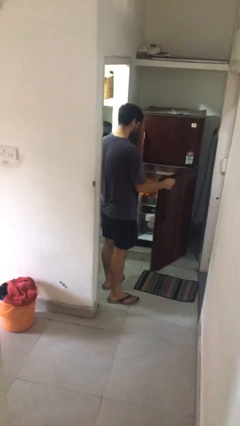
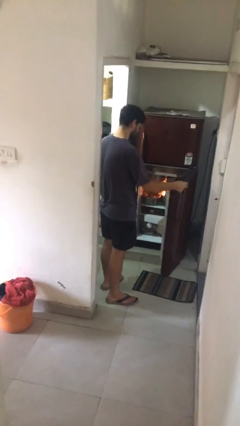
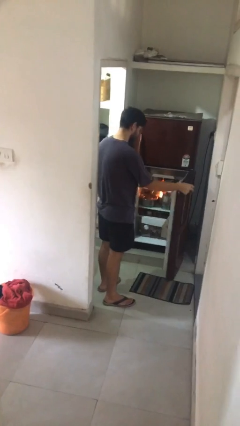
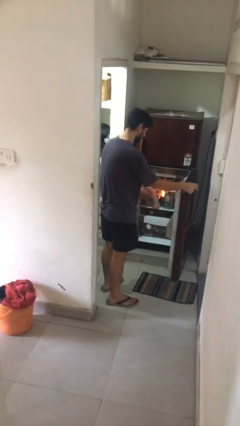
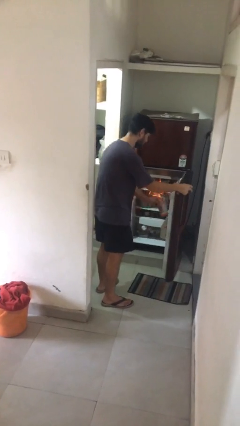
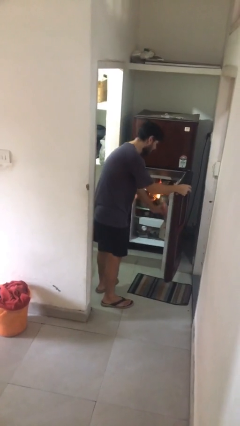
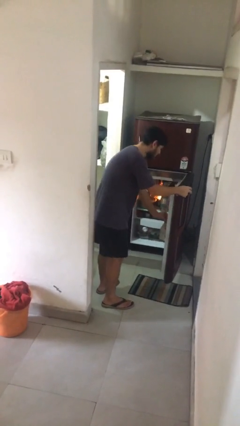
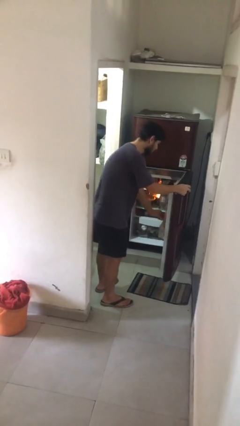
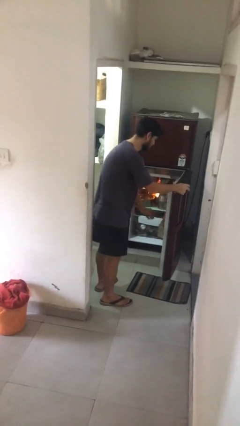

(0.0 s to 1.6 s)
person puts object into refrigerator

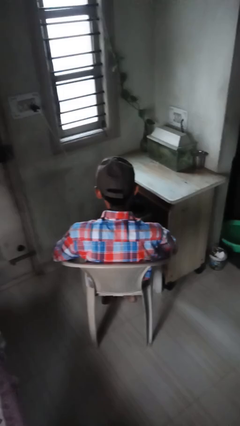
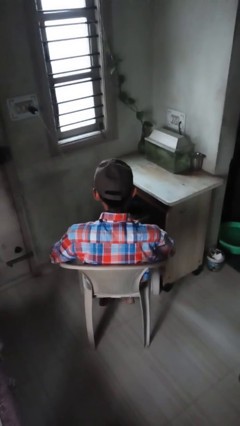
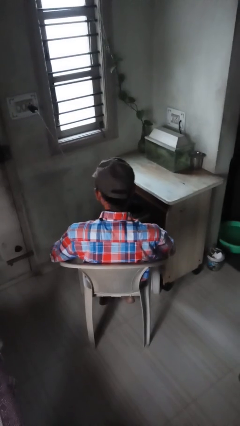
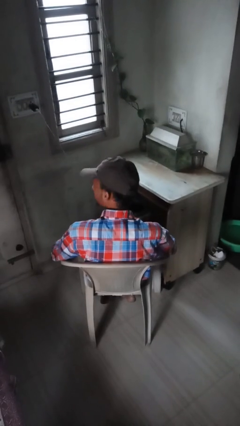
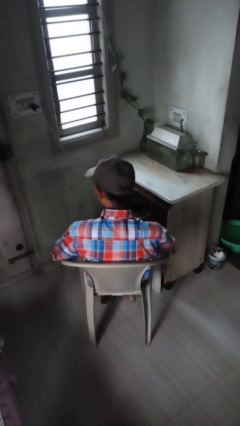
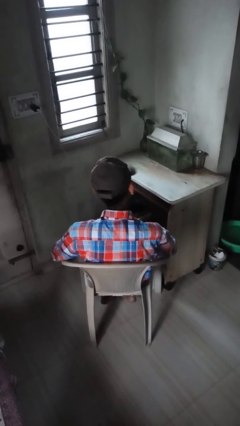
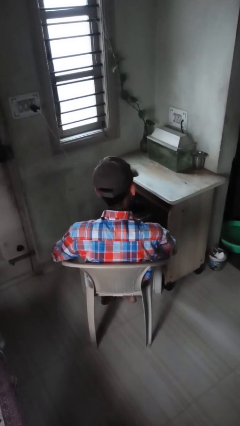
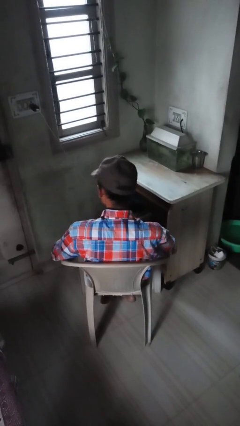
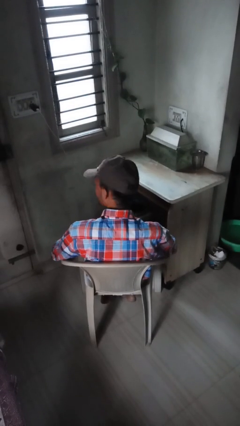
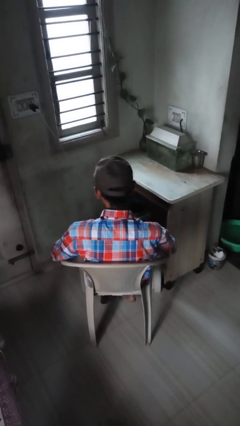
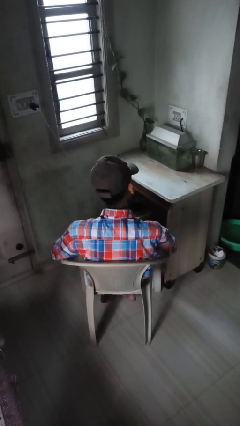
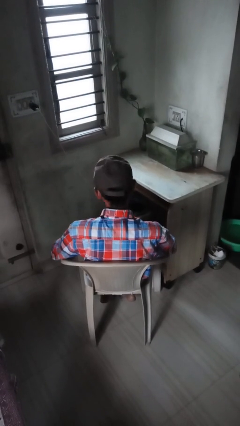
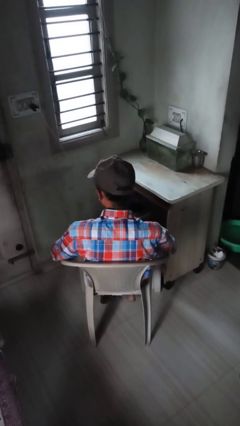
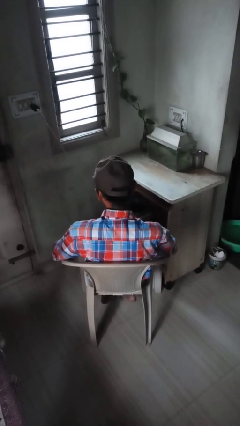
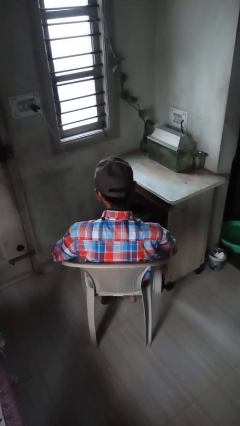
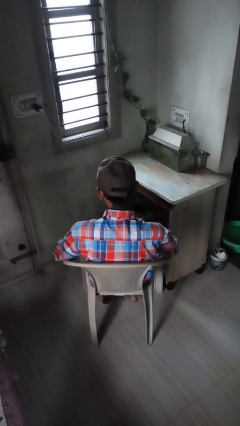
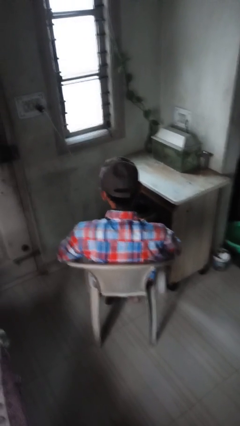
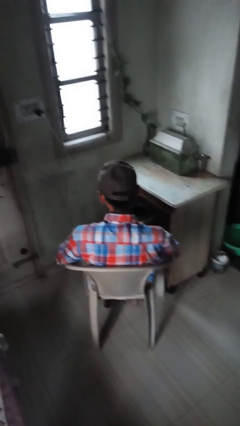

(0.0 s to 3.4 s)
person shakes head

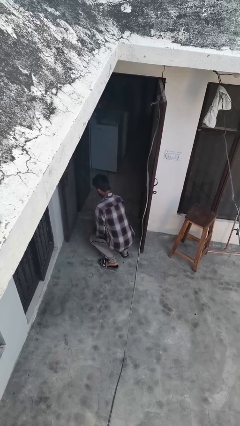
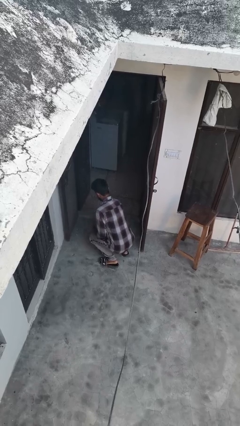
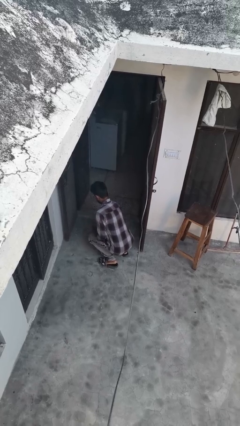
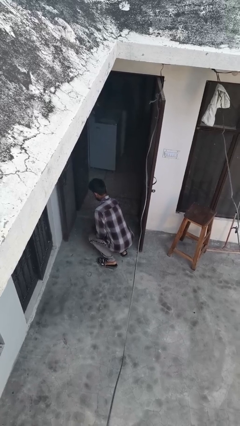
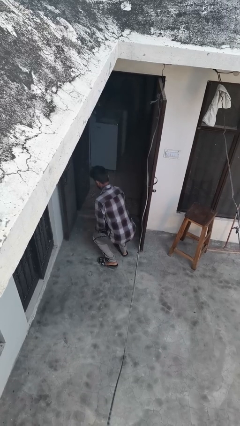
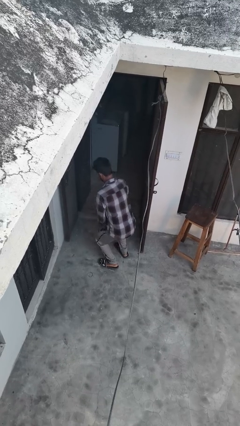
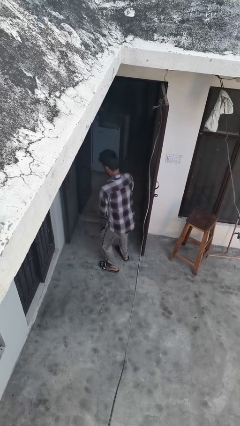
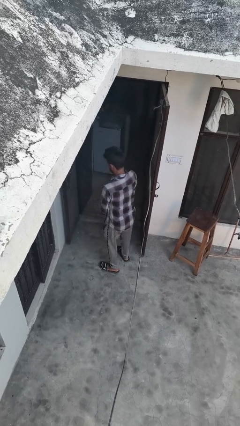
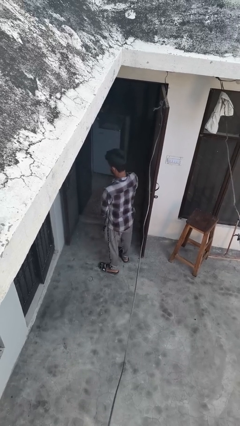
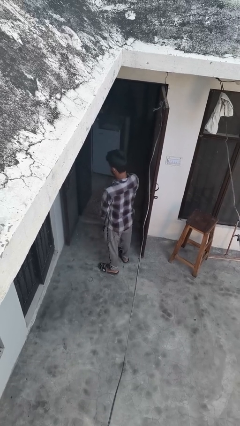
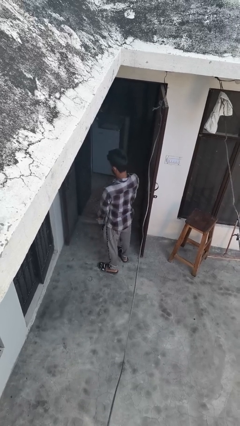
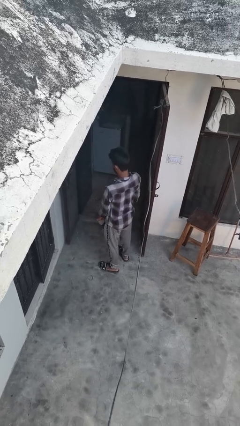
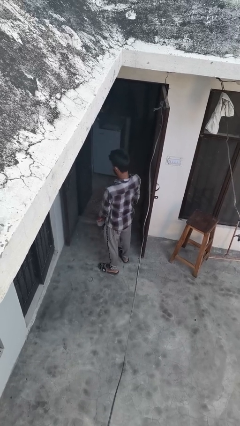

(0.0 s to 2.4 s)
person picks up object from floor

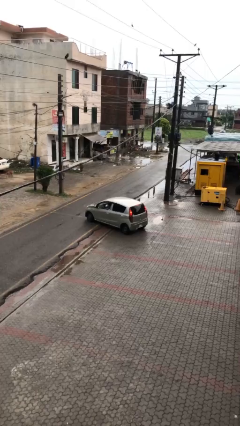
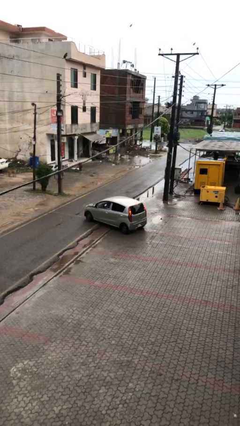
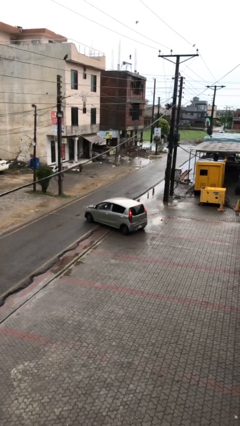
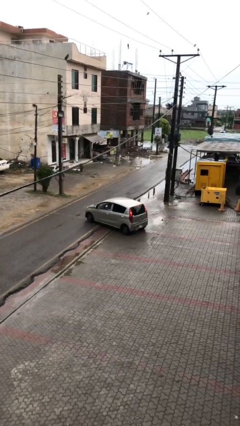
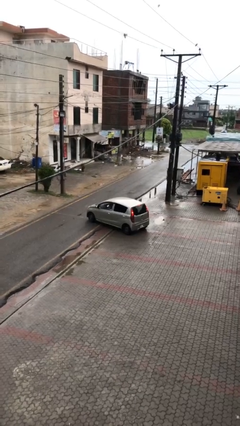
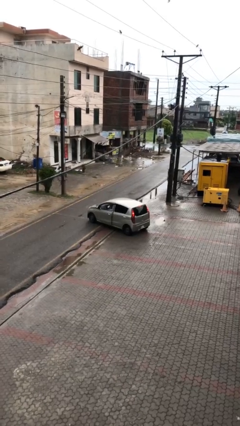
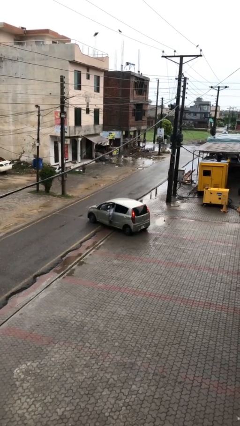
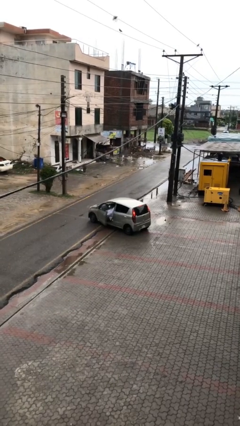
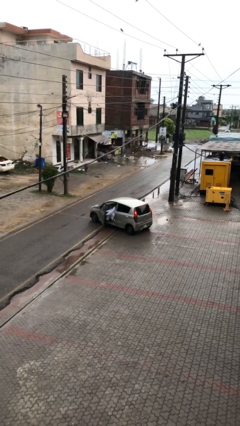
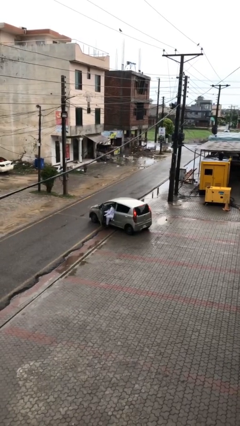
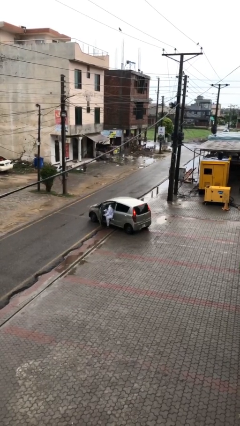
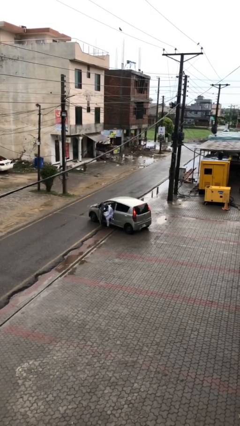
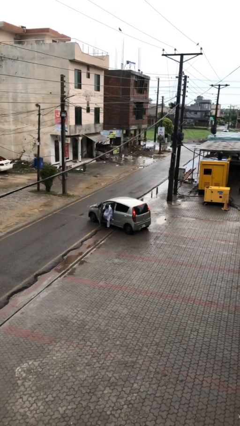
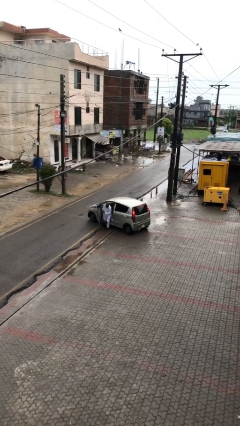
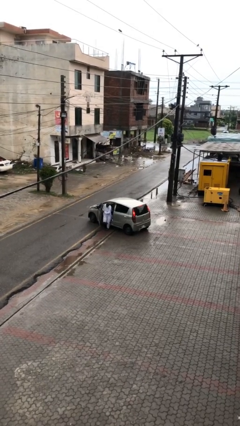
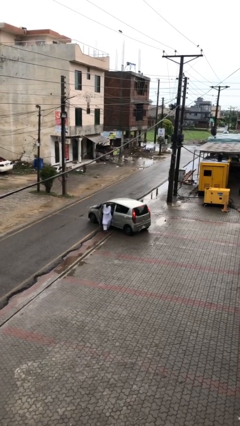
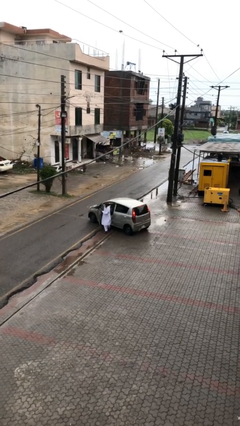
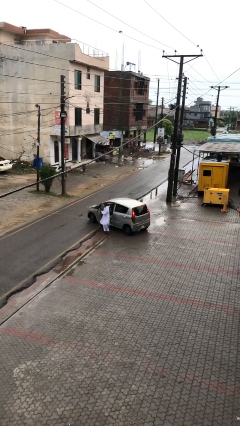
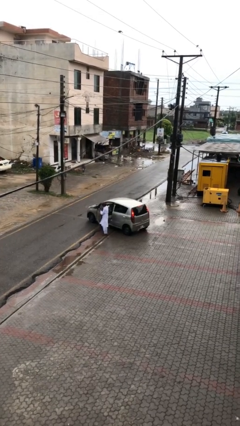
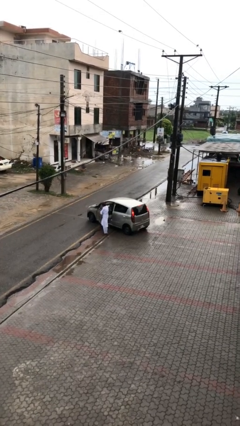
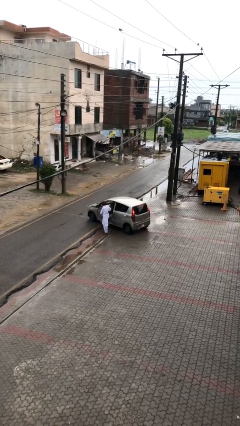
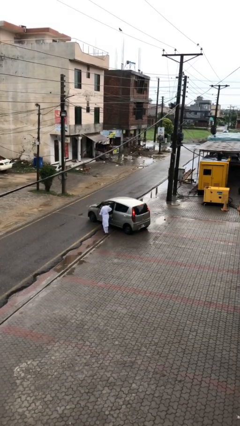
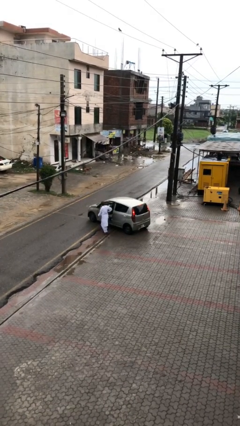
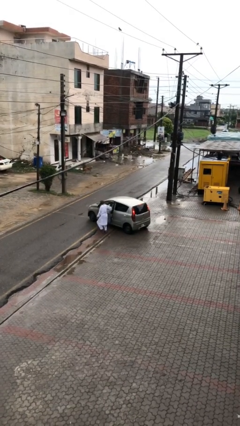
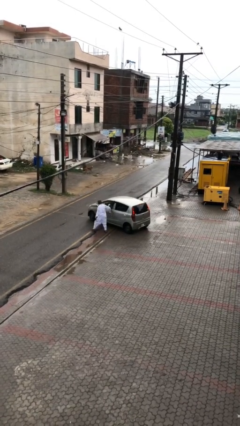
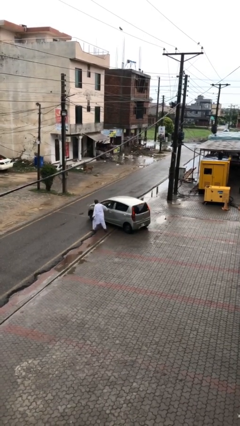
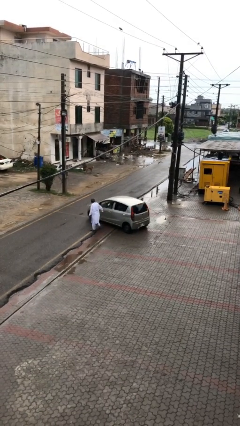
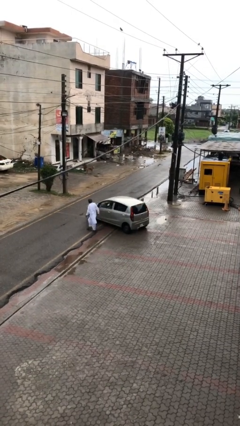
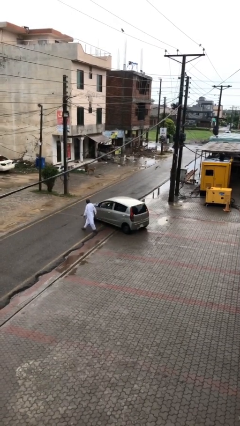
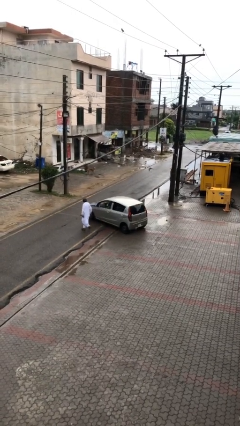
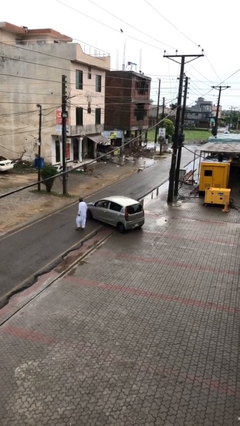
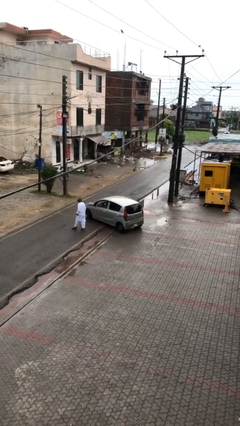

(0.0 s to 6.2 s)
car drops off person

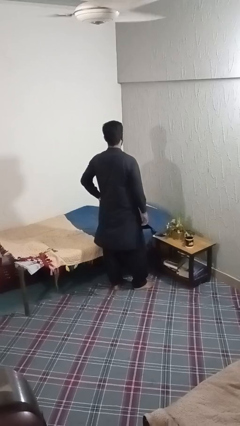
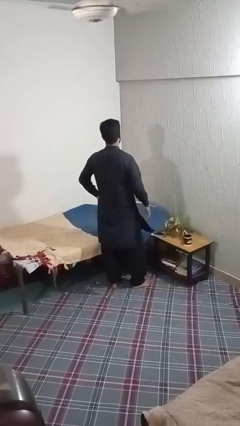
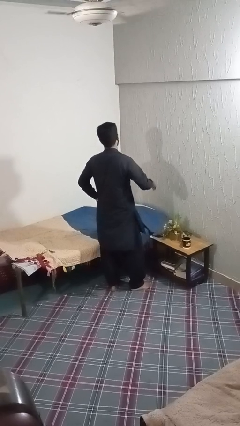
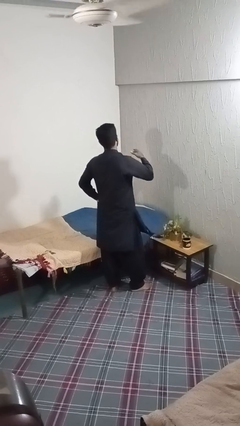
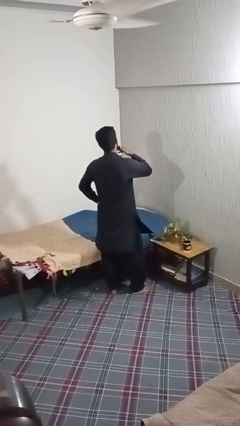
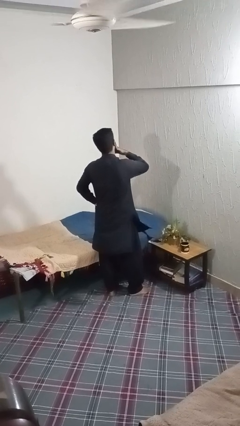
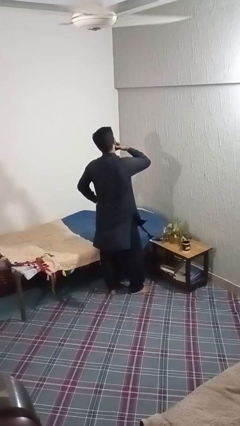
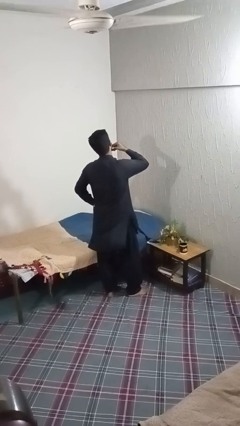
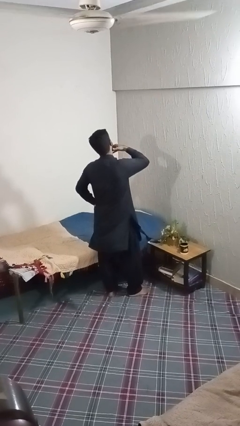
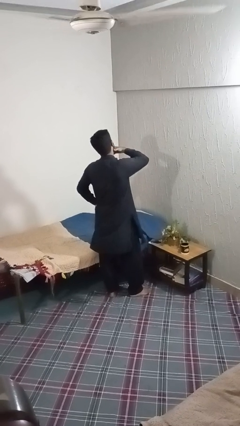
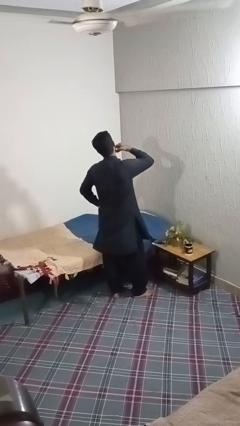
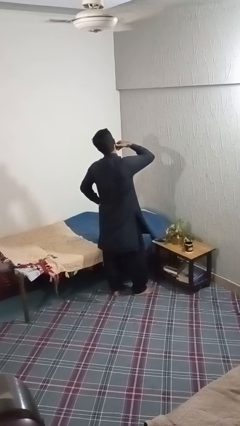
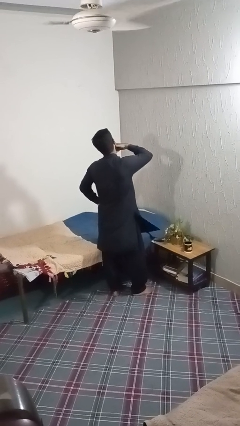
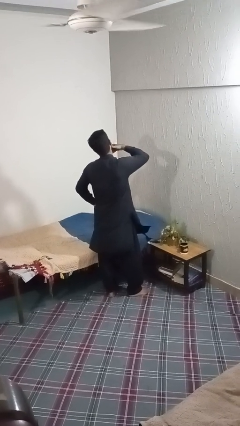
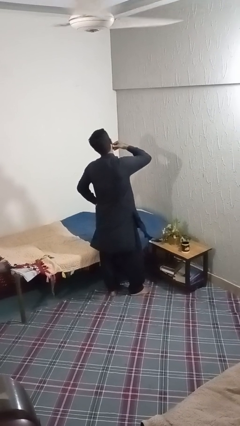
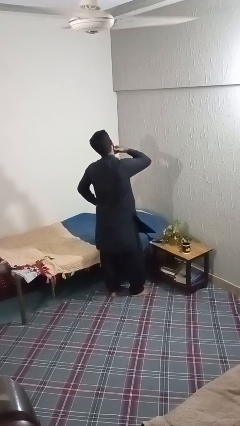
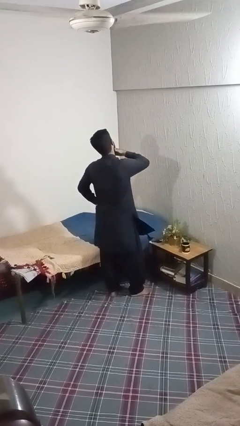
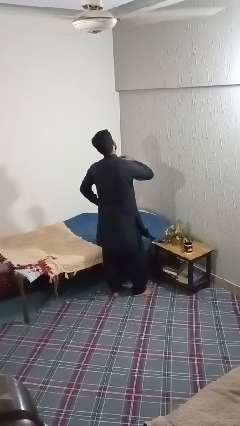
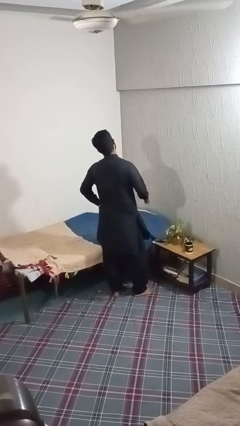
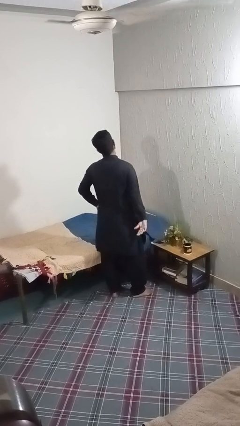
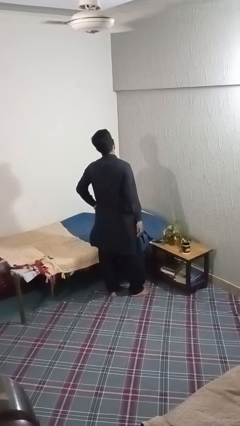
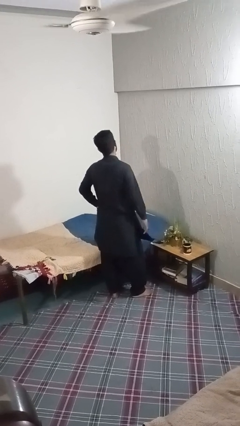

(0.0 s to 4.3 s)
person strokes chin
